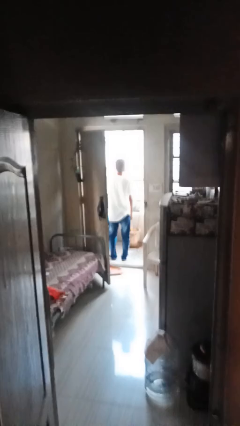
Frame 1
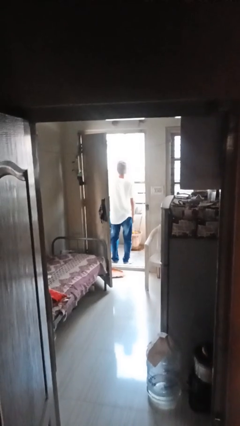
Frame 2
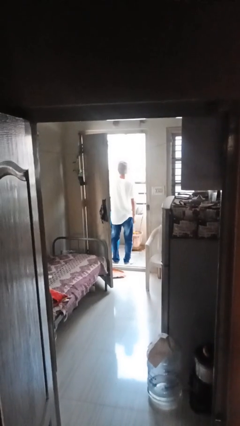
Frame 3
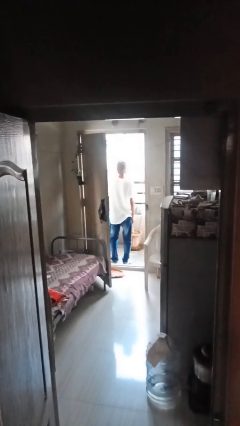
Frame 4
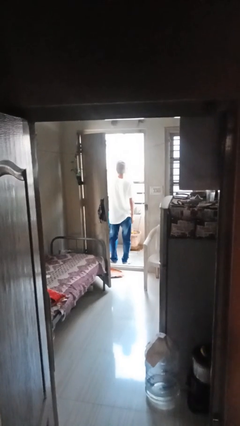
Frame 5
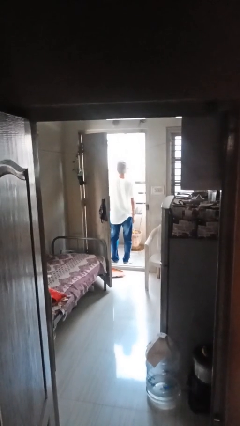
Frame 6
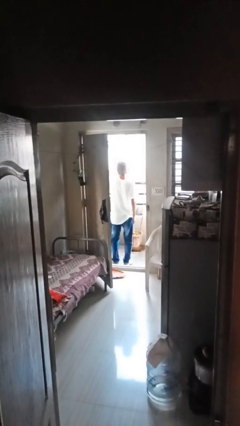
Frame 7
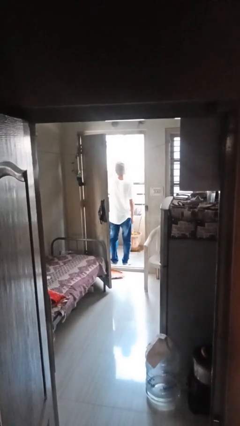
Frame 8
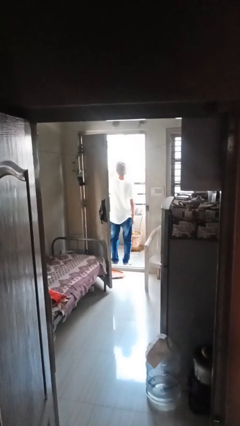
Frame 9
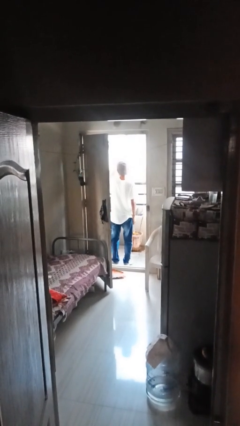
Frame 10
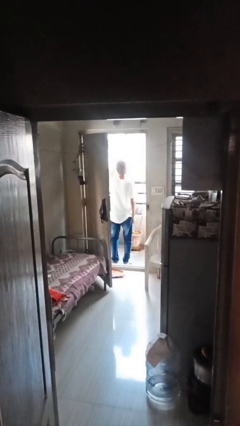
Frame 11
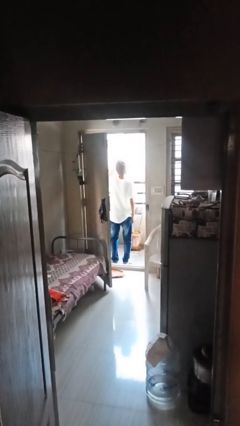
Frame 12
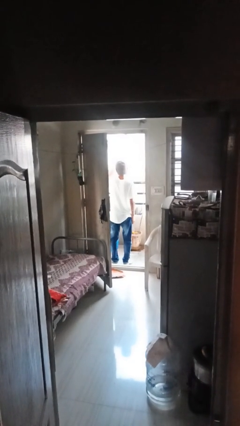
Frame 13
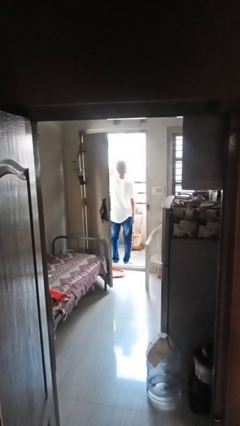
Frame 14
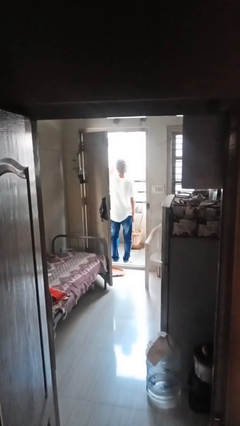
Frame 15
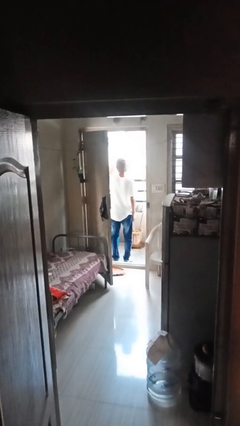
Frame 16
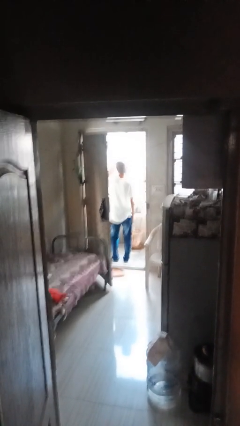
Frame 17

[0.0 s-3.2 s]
person shades eyes

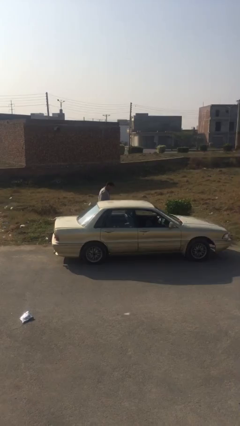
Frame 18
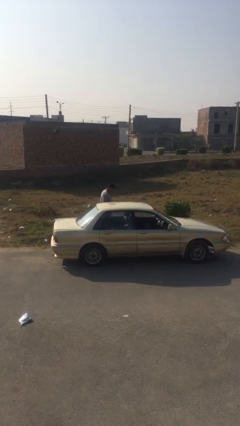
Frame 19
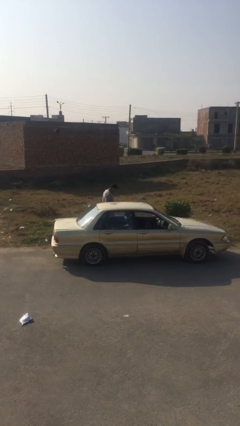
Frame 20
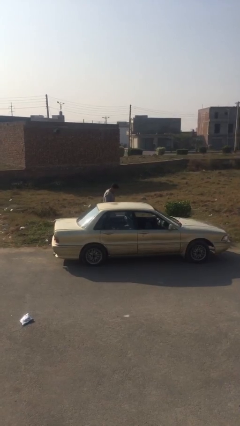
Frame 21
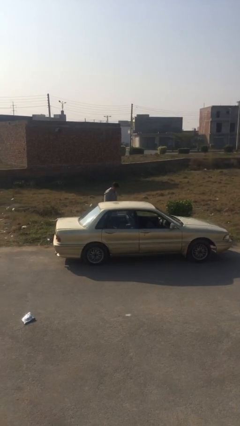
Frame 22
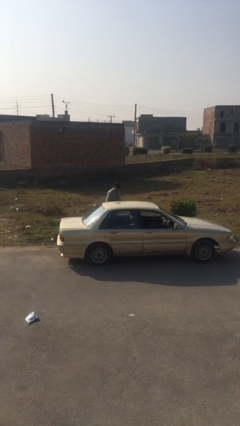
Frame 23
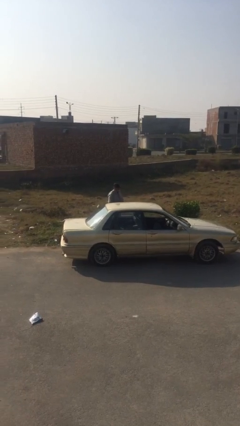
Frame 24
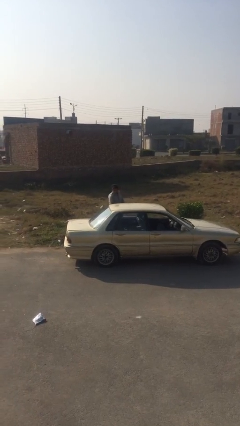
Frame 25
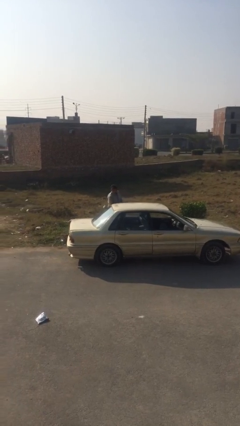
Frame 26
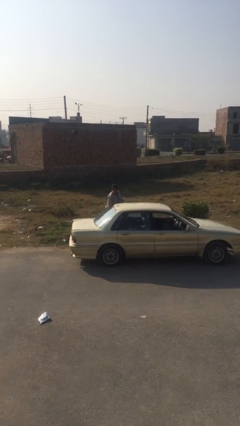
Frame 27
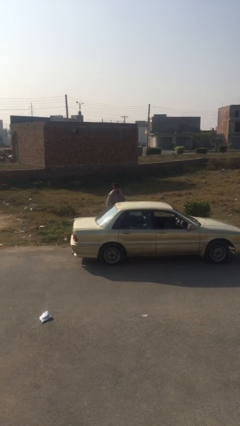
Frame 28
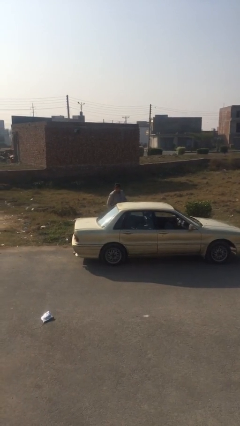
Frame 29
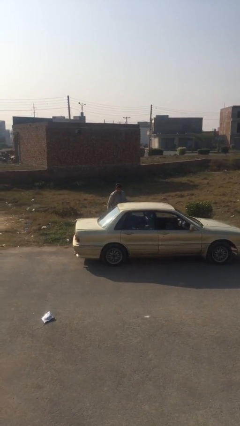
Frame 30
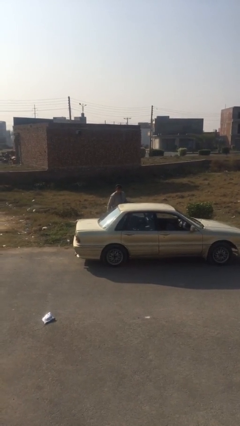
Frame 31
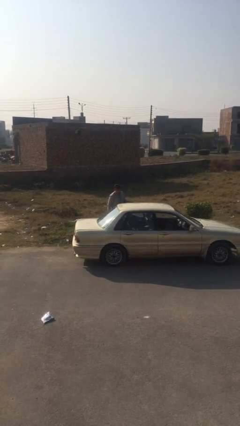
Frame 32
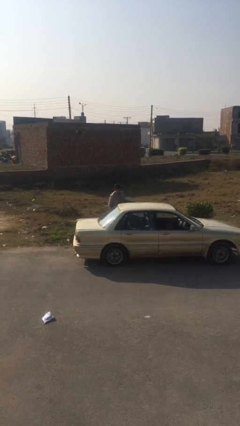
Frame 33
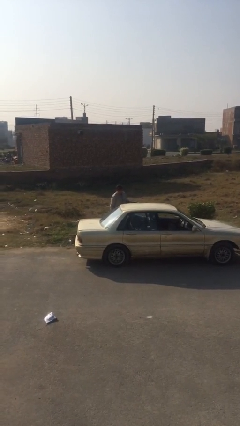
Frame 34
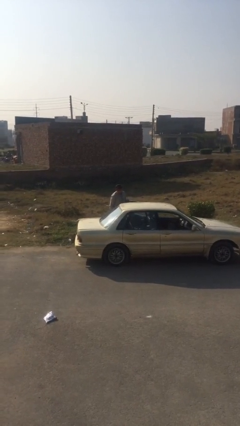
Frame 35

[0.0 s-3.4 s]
person opens car door

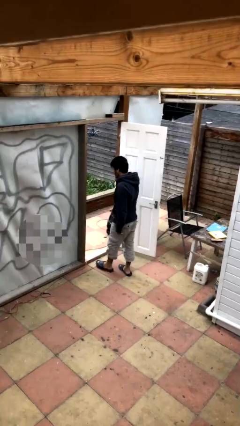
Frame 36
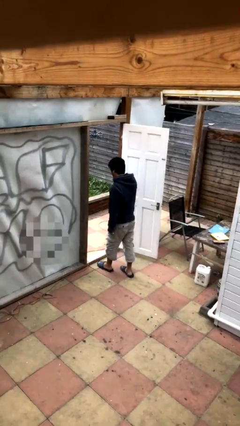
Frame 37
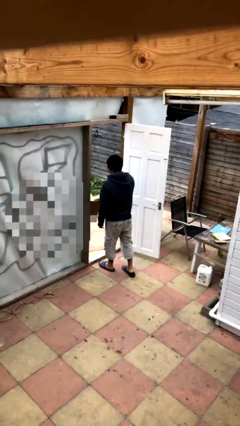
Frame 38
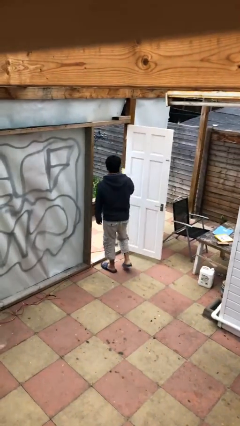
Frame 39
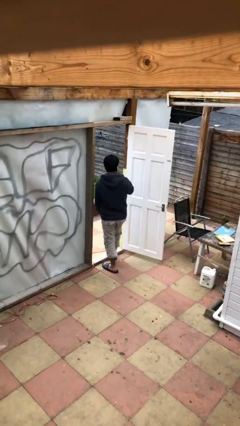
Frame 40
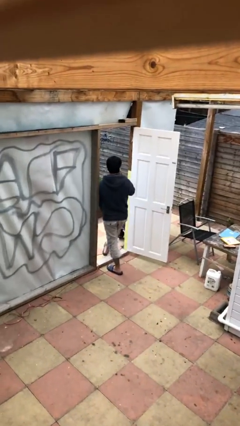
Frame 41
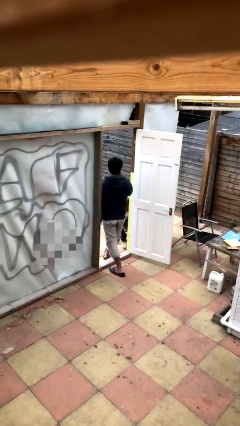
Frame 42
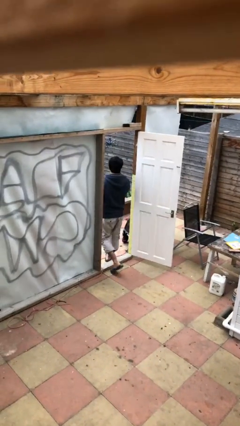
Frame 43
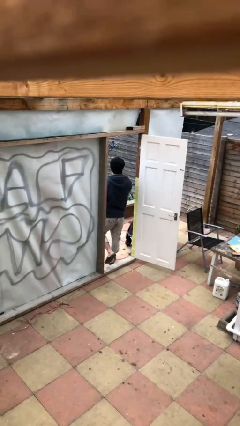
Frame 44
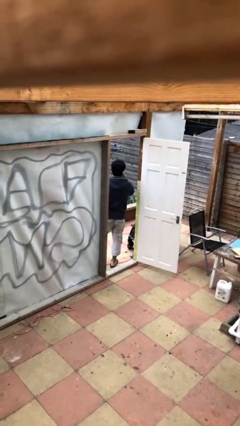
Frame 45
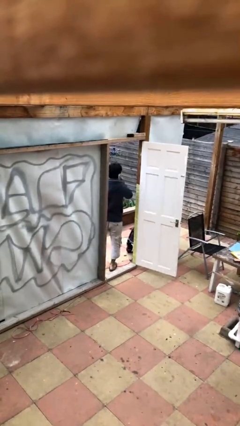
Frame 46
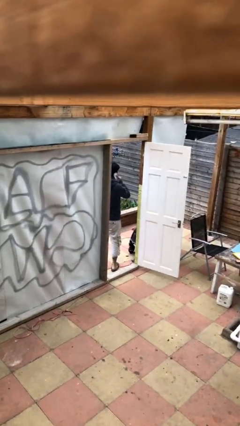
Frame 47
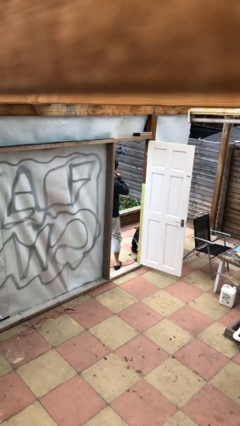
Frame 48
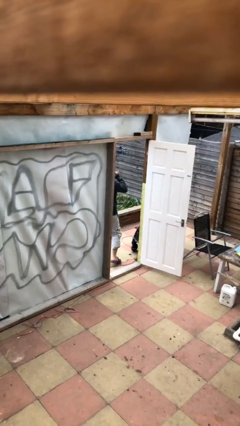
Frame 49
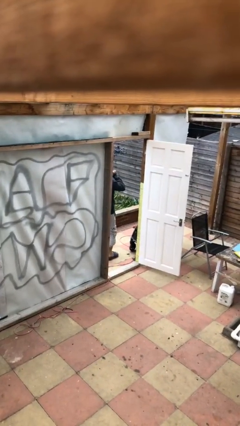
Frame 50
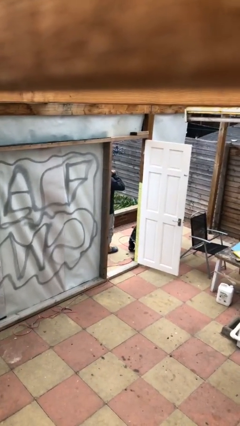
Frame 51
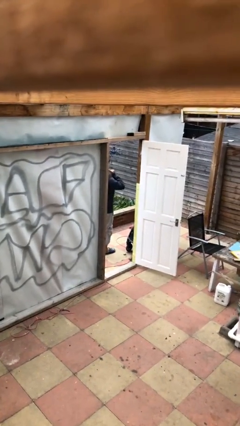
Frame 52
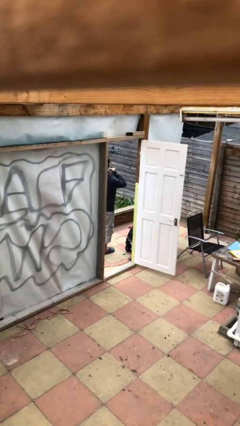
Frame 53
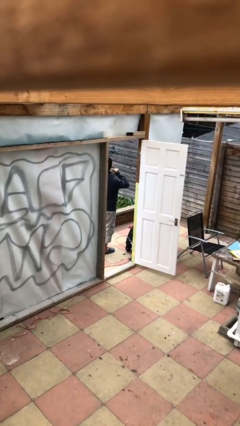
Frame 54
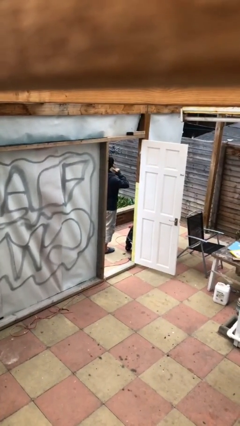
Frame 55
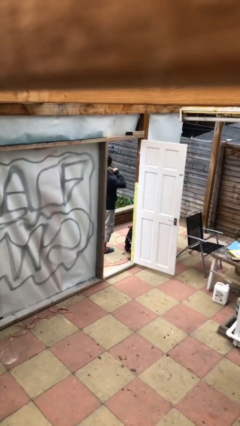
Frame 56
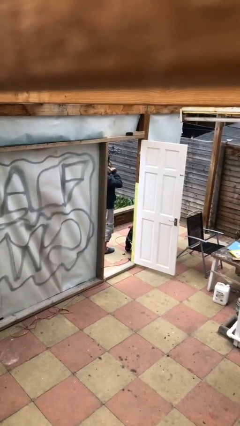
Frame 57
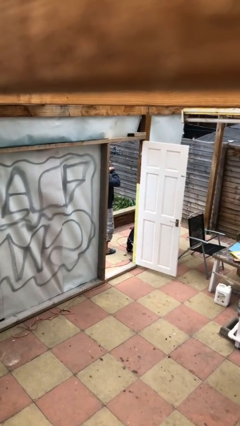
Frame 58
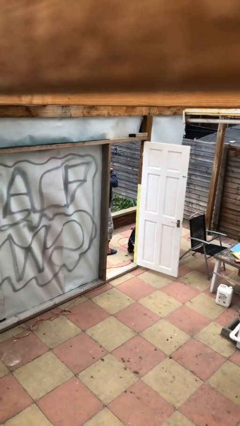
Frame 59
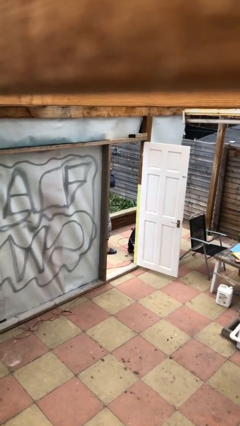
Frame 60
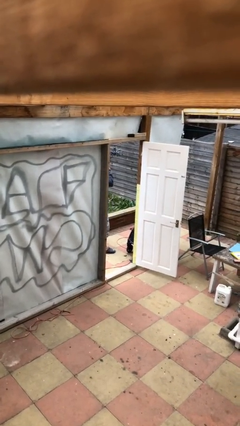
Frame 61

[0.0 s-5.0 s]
person exits scene through structure

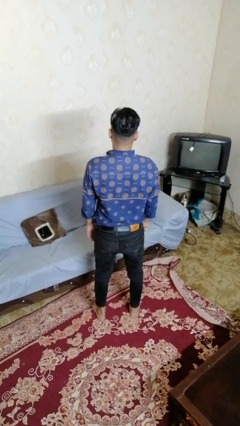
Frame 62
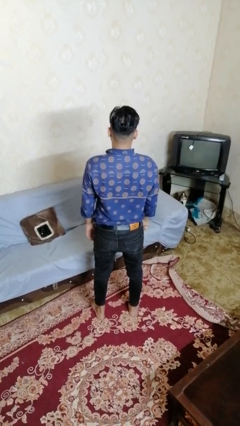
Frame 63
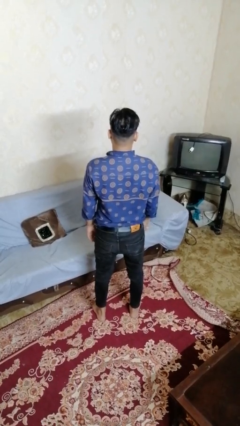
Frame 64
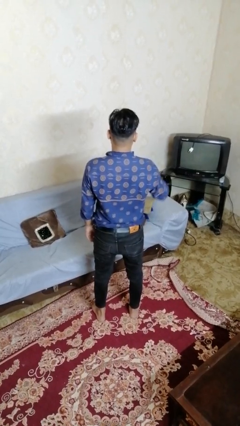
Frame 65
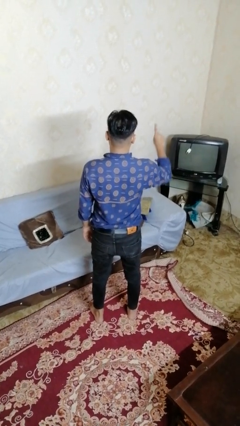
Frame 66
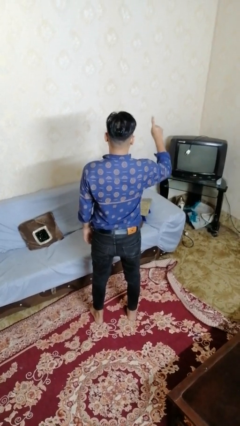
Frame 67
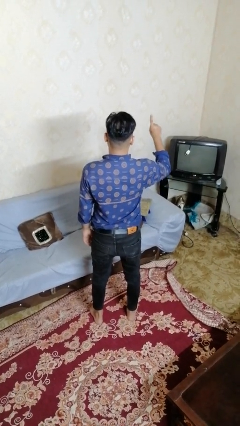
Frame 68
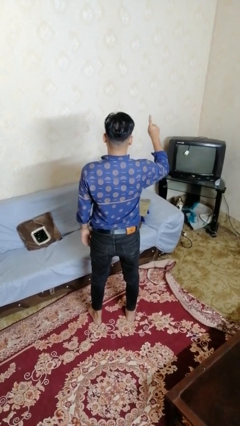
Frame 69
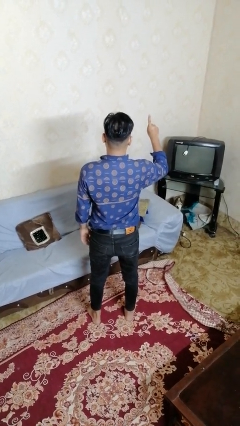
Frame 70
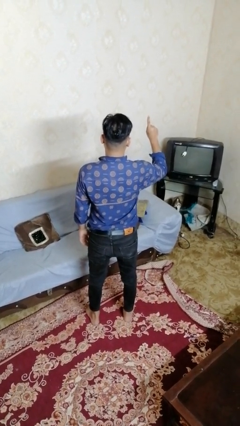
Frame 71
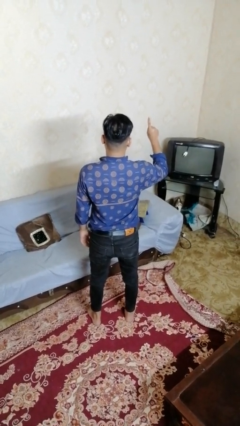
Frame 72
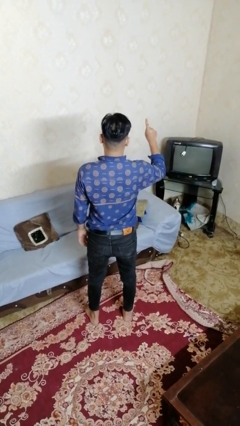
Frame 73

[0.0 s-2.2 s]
person gestures number one

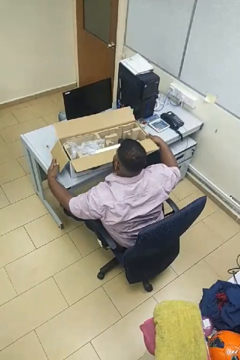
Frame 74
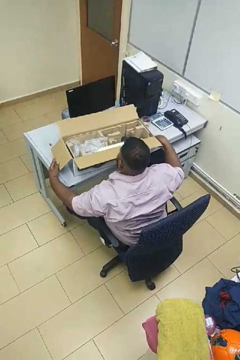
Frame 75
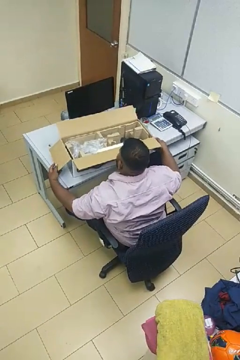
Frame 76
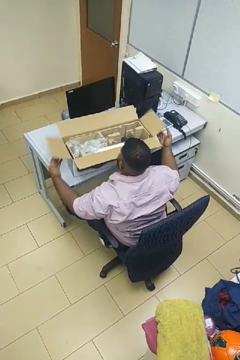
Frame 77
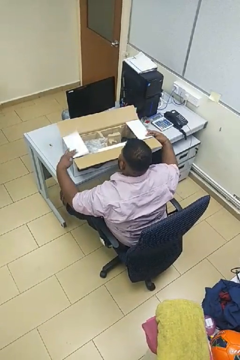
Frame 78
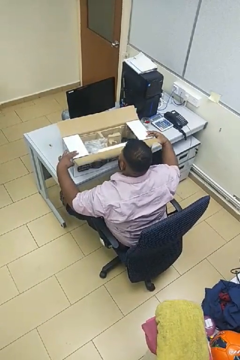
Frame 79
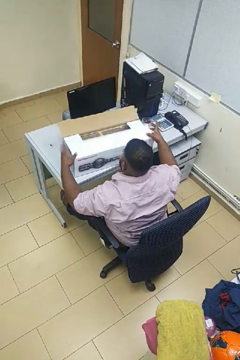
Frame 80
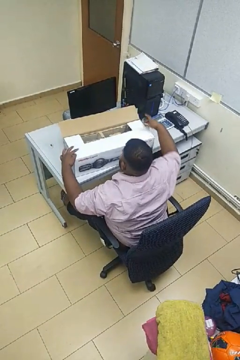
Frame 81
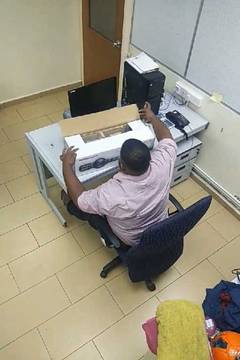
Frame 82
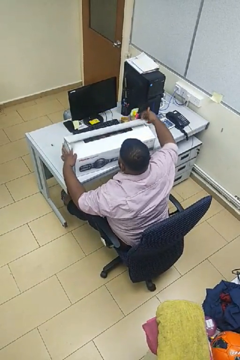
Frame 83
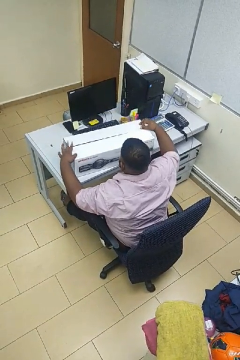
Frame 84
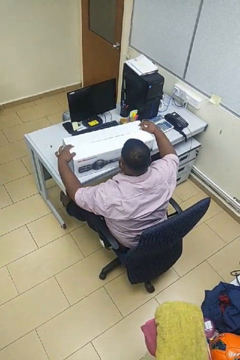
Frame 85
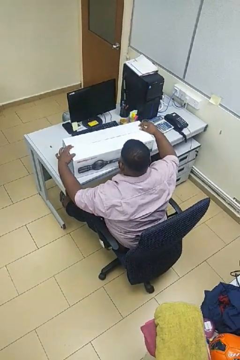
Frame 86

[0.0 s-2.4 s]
person closes box

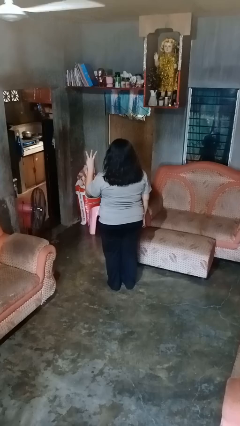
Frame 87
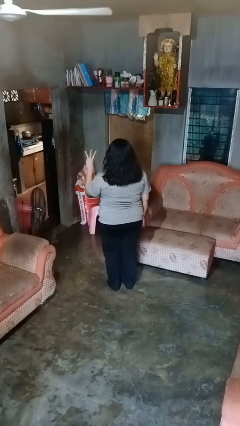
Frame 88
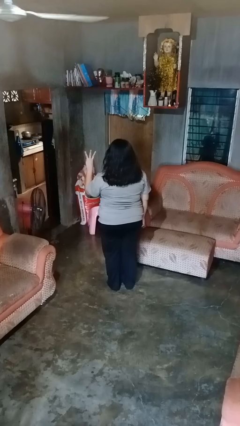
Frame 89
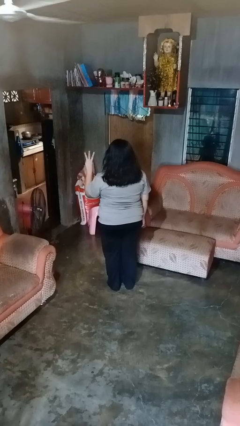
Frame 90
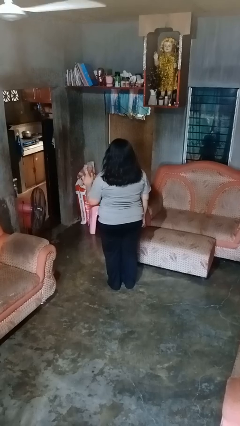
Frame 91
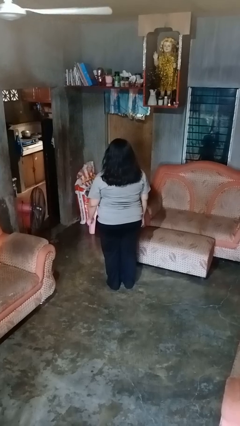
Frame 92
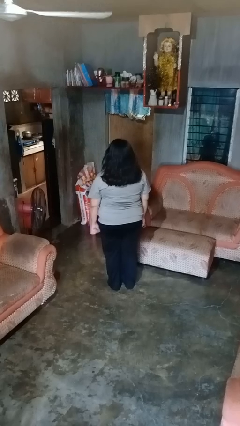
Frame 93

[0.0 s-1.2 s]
person gestures number three

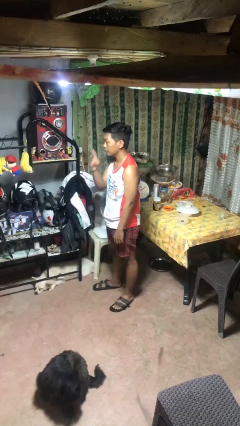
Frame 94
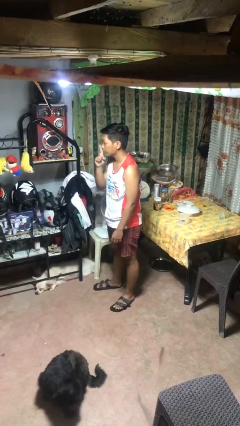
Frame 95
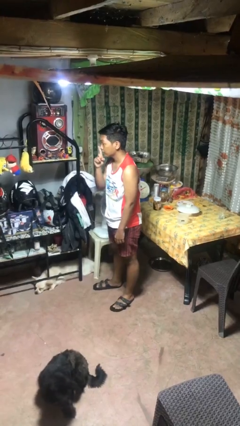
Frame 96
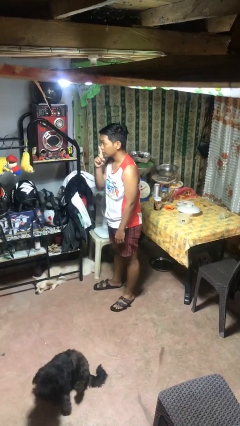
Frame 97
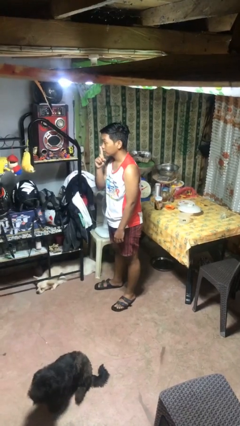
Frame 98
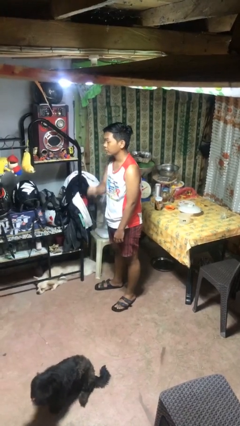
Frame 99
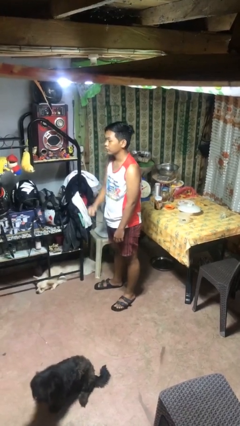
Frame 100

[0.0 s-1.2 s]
person gestures be quiet
